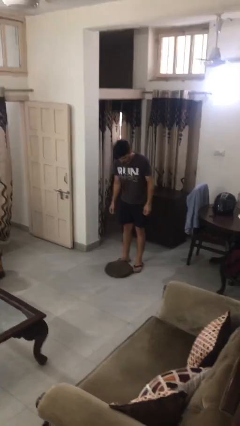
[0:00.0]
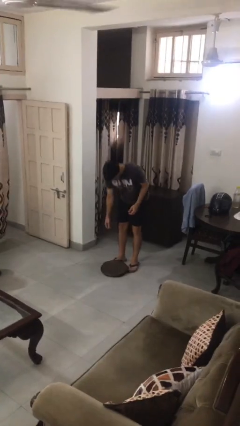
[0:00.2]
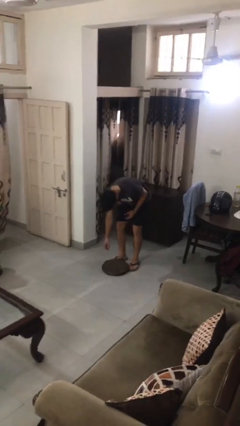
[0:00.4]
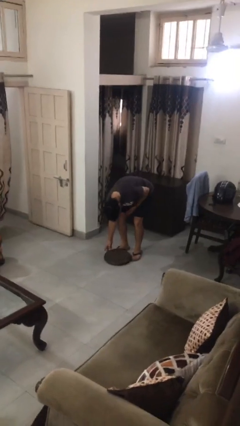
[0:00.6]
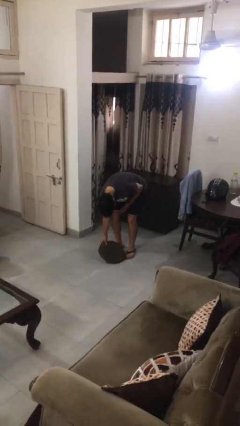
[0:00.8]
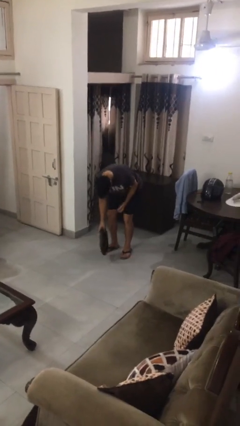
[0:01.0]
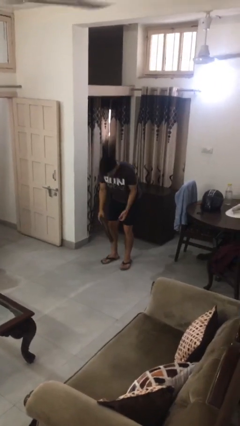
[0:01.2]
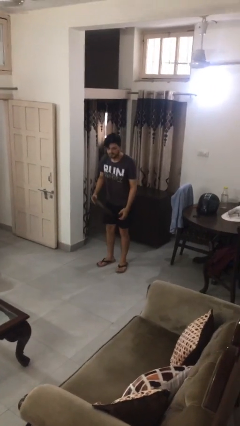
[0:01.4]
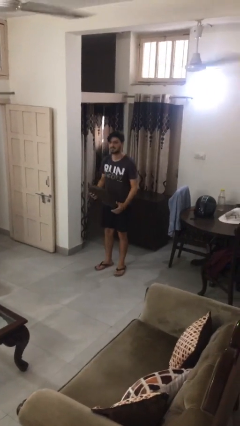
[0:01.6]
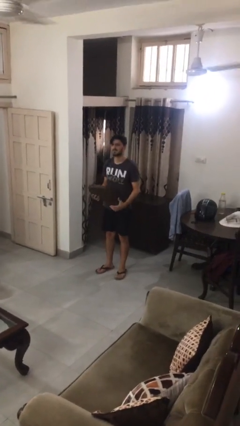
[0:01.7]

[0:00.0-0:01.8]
person picks up object from floor

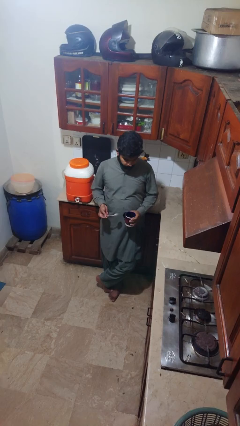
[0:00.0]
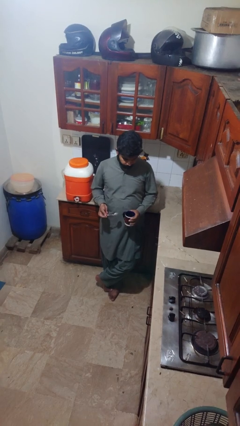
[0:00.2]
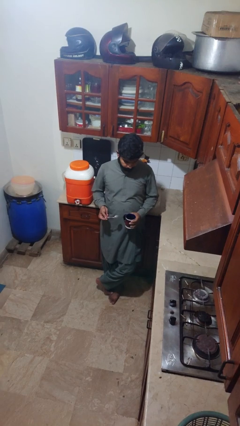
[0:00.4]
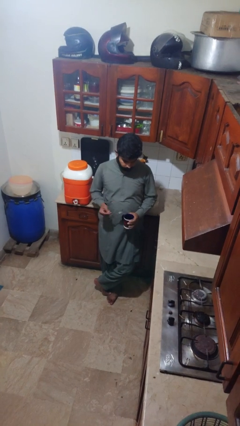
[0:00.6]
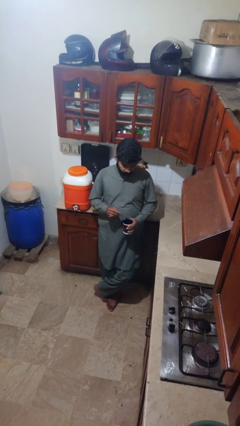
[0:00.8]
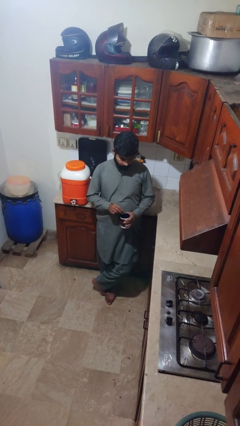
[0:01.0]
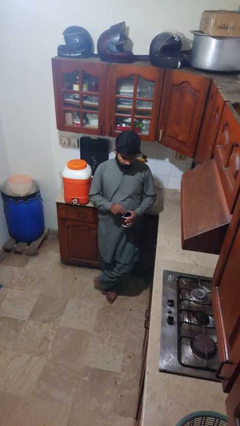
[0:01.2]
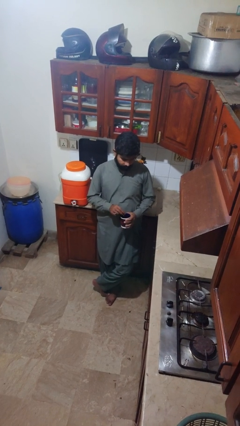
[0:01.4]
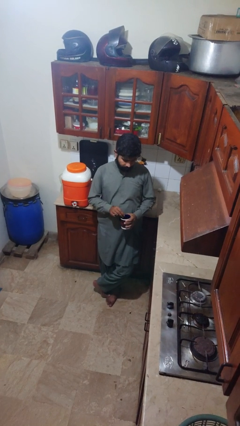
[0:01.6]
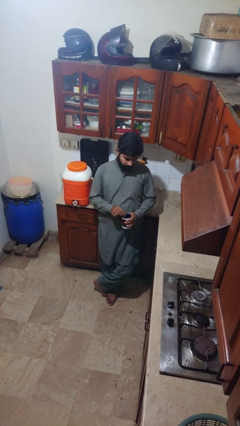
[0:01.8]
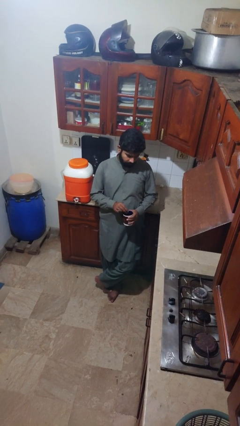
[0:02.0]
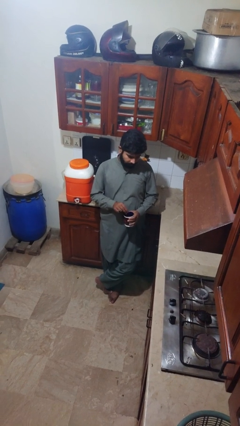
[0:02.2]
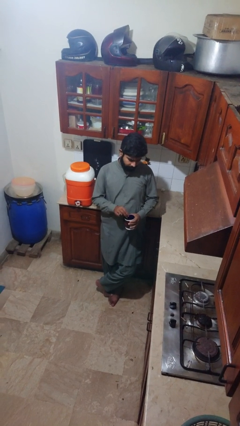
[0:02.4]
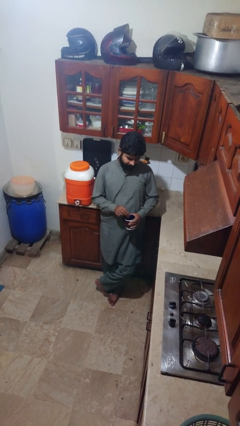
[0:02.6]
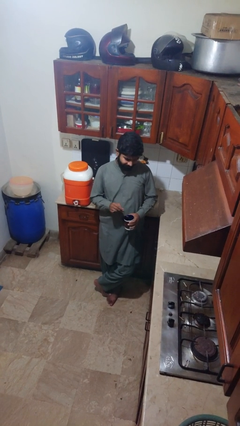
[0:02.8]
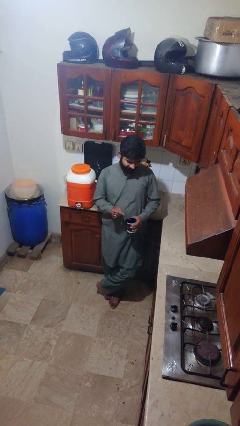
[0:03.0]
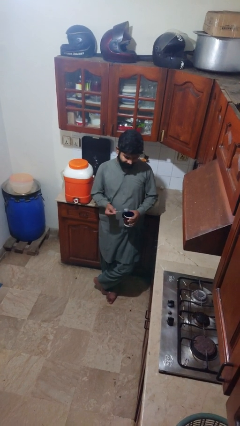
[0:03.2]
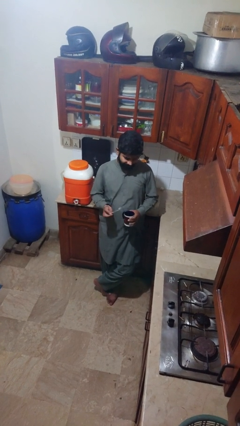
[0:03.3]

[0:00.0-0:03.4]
person stirs mug

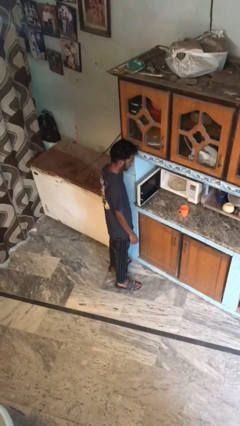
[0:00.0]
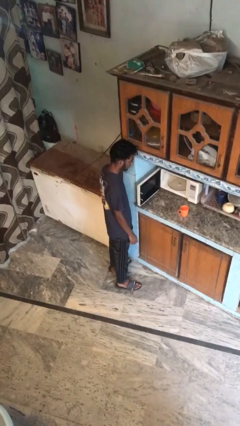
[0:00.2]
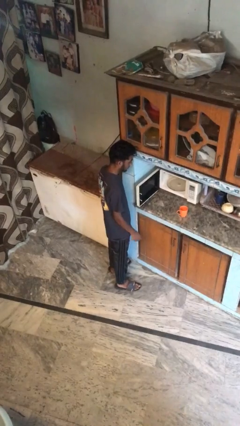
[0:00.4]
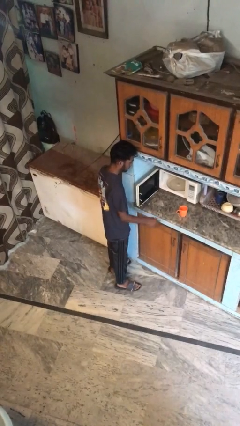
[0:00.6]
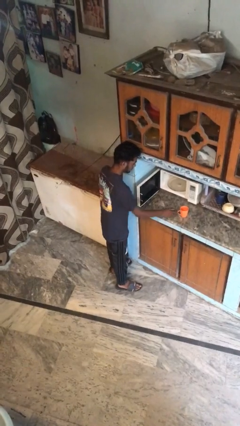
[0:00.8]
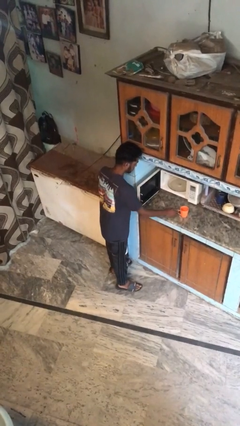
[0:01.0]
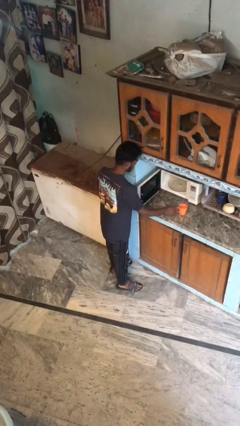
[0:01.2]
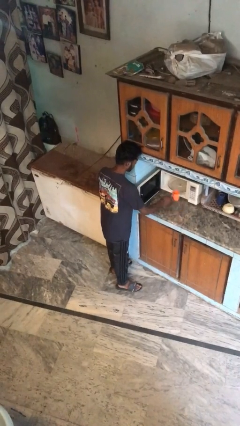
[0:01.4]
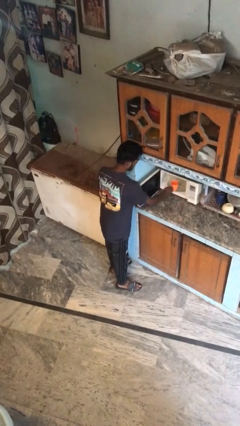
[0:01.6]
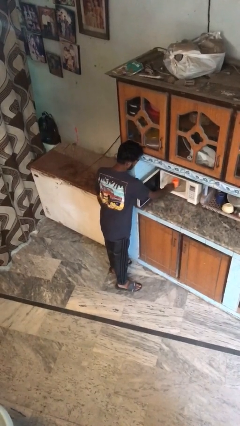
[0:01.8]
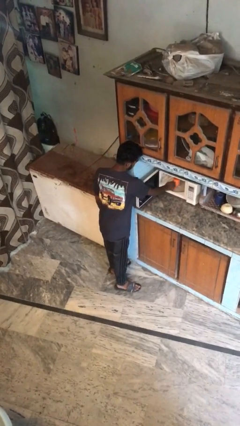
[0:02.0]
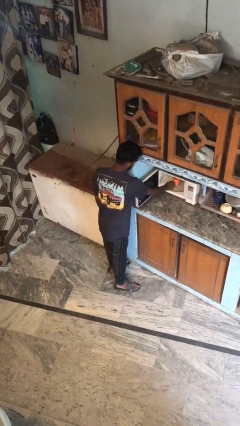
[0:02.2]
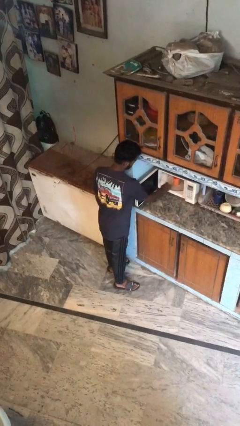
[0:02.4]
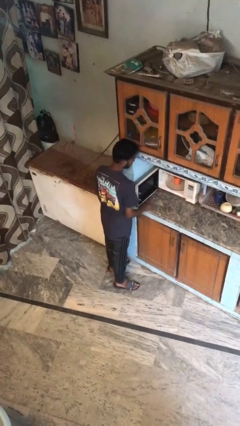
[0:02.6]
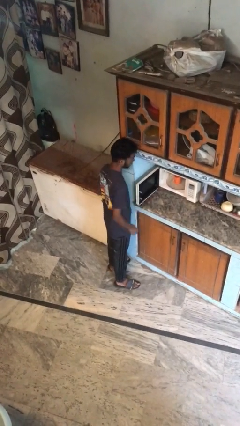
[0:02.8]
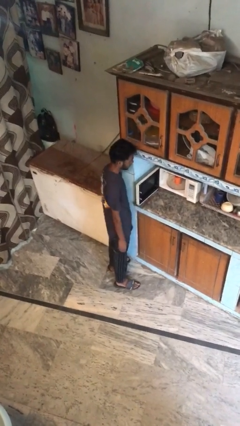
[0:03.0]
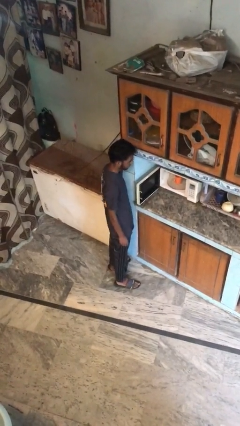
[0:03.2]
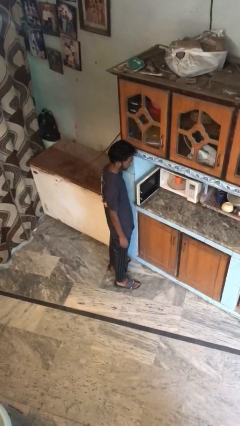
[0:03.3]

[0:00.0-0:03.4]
person puts object into microwave

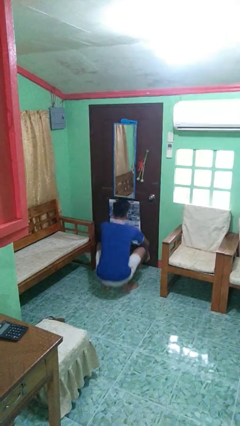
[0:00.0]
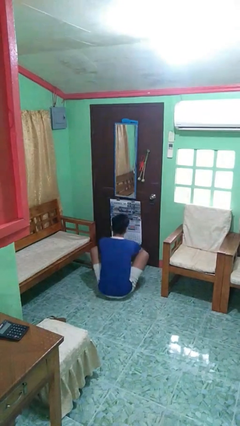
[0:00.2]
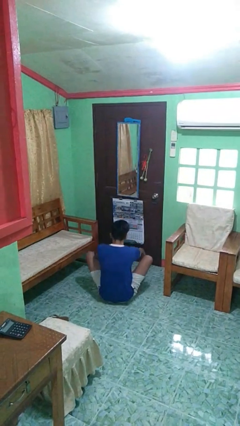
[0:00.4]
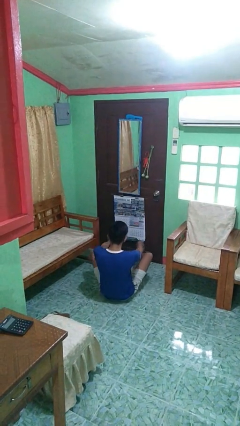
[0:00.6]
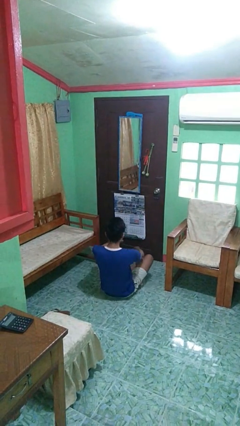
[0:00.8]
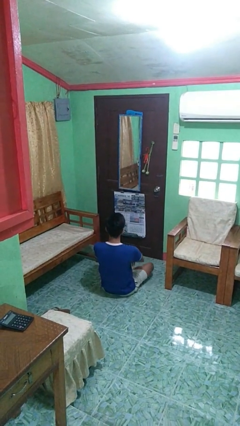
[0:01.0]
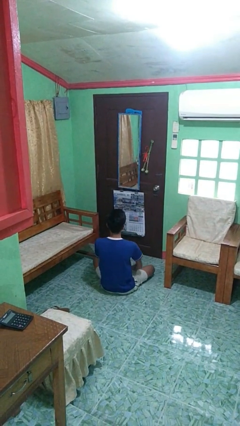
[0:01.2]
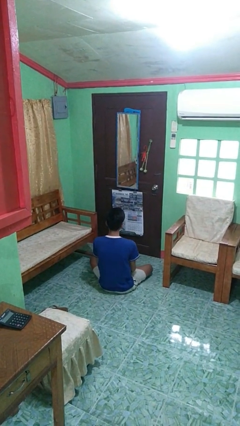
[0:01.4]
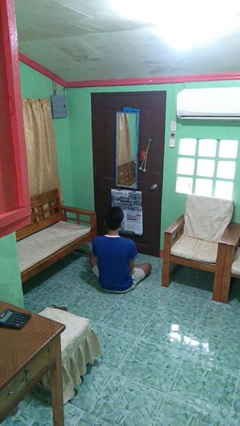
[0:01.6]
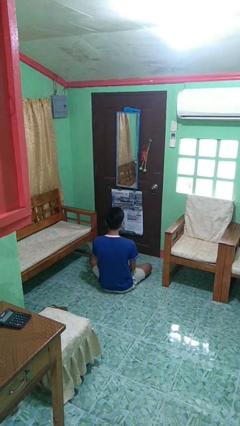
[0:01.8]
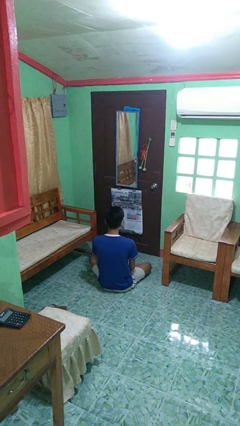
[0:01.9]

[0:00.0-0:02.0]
person sits crisscross

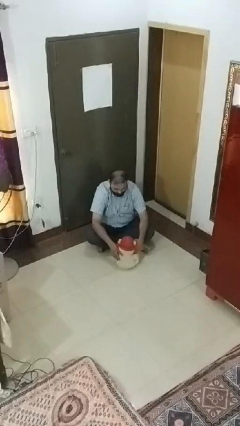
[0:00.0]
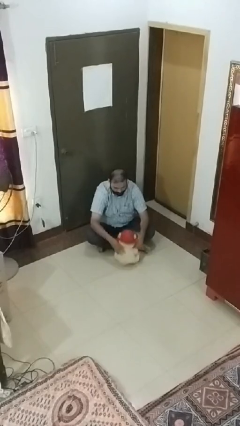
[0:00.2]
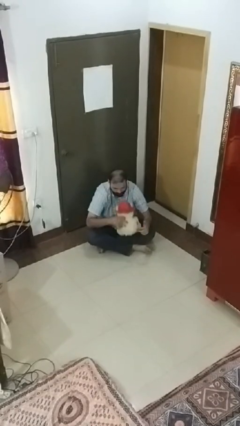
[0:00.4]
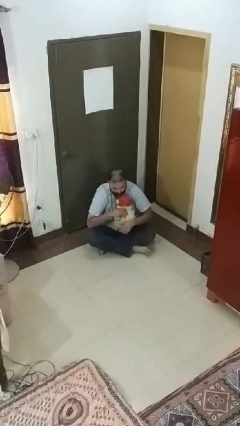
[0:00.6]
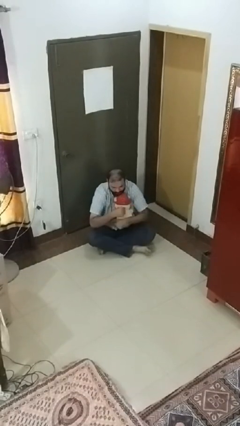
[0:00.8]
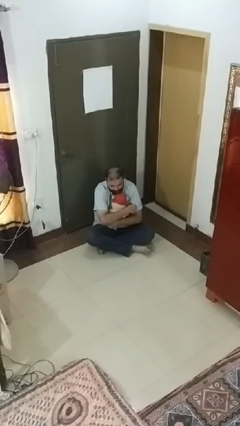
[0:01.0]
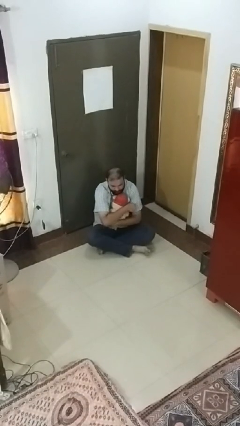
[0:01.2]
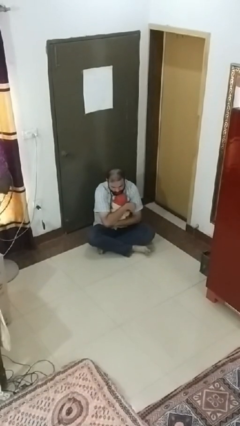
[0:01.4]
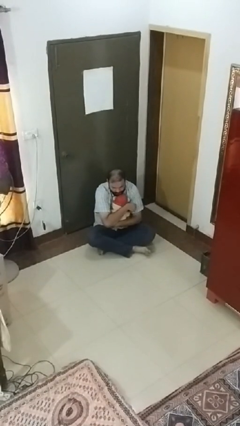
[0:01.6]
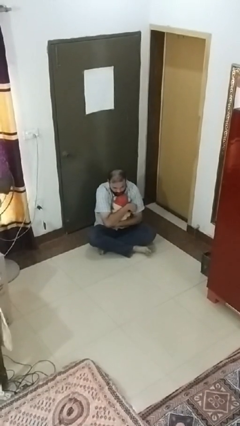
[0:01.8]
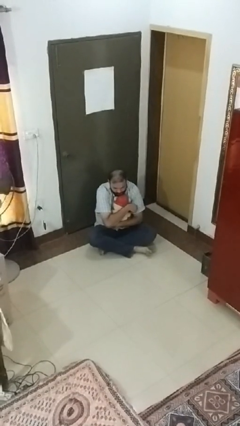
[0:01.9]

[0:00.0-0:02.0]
person hugs stuffed animal

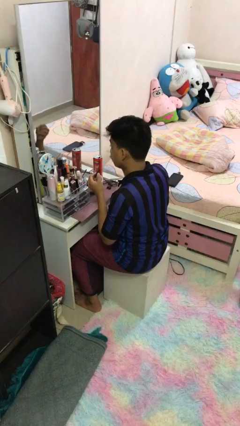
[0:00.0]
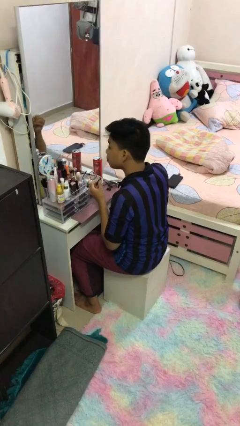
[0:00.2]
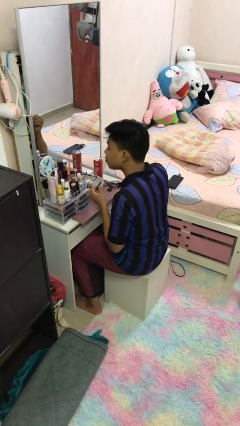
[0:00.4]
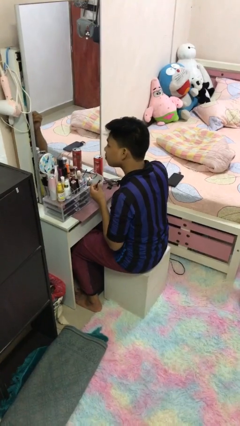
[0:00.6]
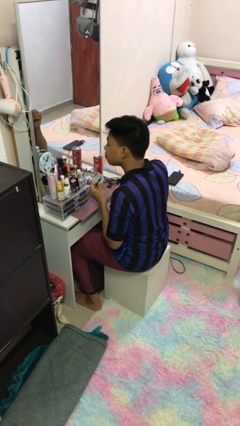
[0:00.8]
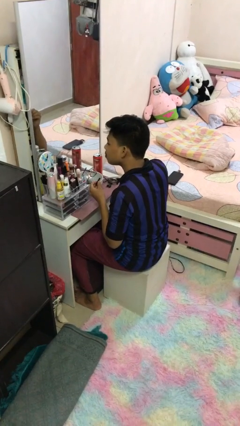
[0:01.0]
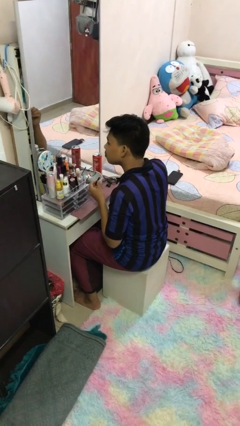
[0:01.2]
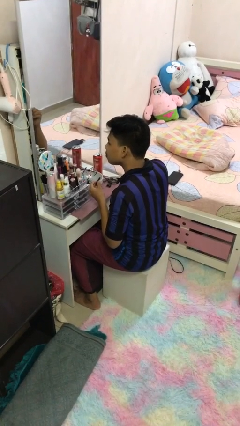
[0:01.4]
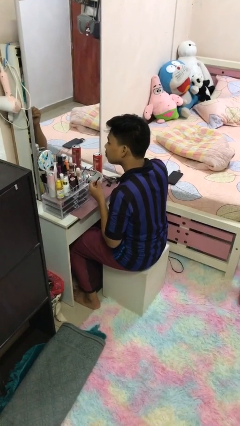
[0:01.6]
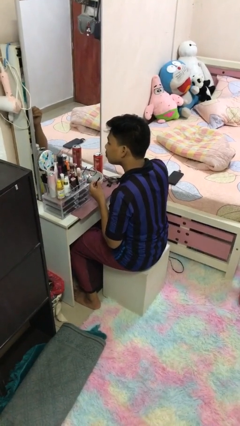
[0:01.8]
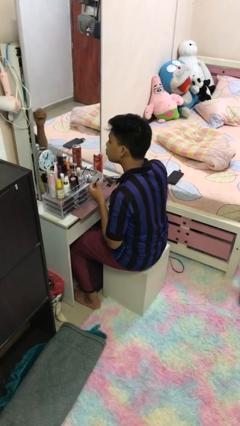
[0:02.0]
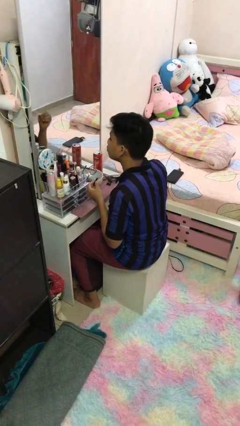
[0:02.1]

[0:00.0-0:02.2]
person applies eye makeup

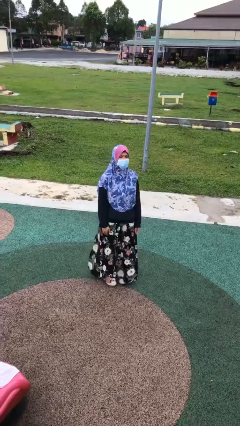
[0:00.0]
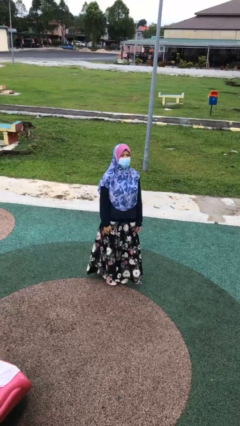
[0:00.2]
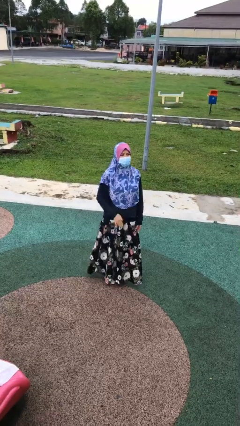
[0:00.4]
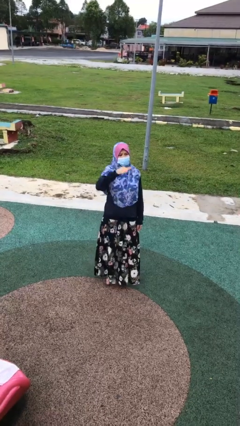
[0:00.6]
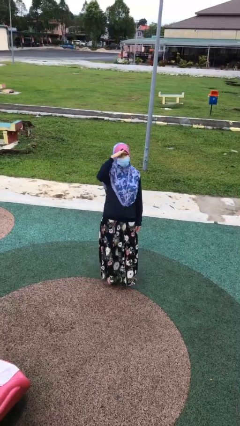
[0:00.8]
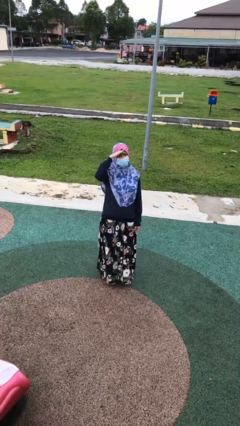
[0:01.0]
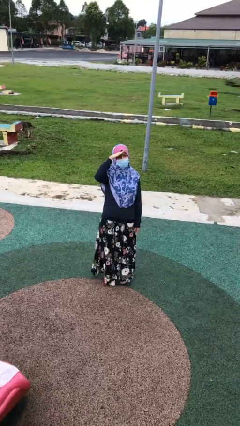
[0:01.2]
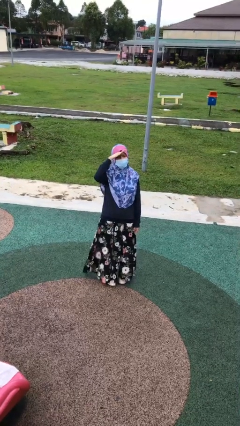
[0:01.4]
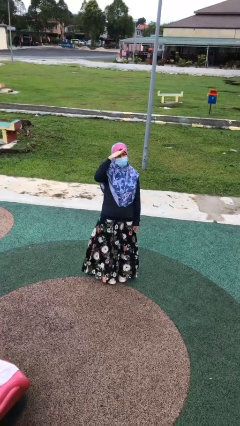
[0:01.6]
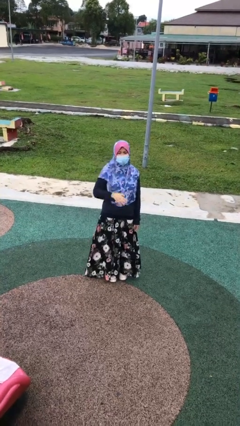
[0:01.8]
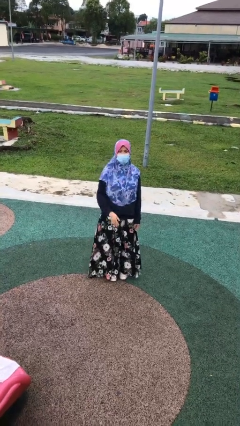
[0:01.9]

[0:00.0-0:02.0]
person salutes
